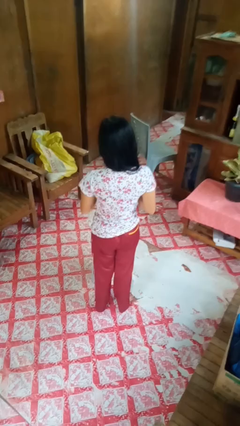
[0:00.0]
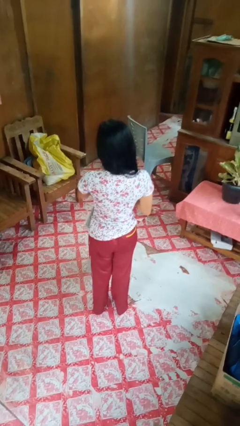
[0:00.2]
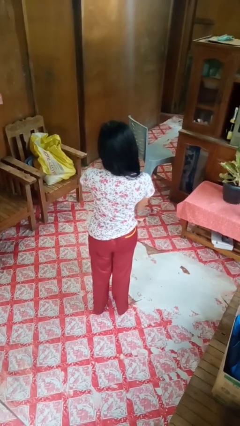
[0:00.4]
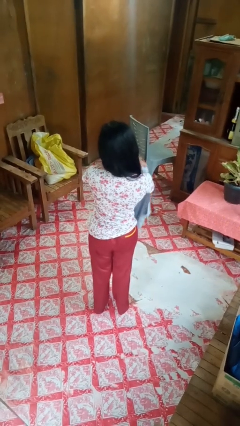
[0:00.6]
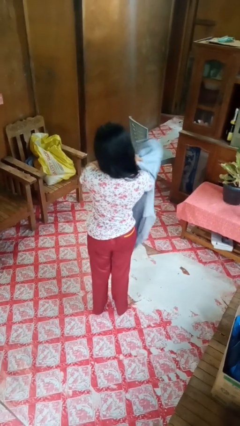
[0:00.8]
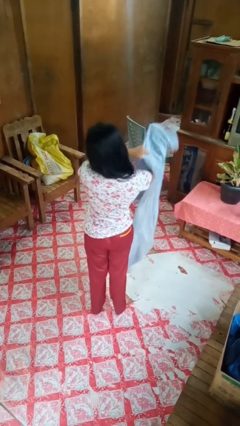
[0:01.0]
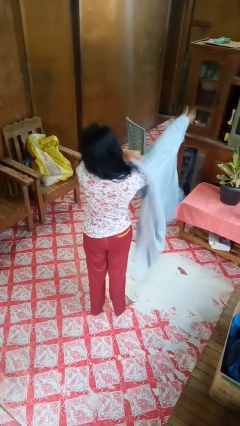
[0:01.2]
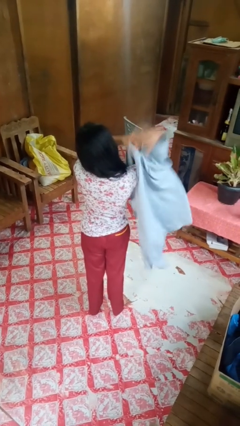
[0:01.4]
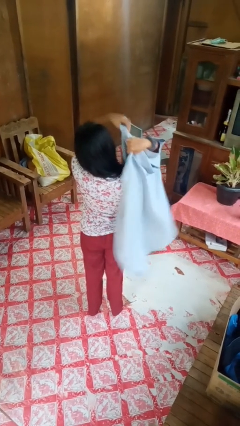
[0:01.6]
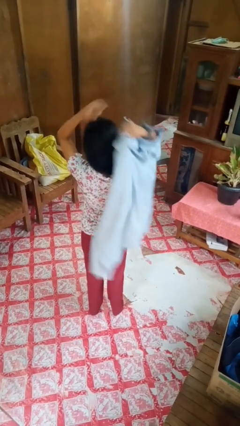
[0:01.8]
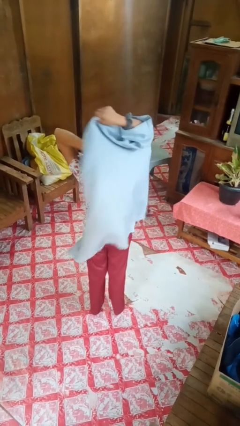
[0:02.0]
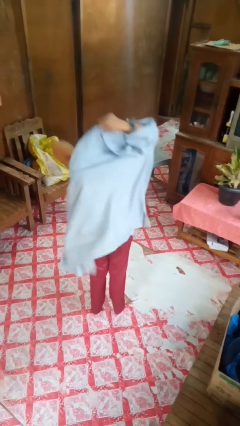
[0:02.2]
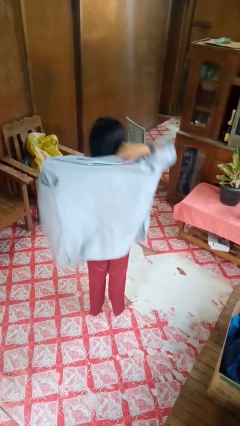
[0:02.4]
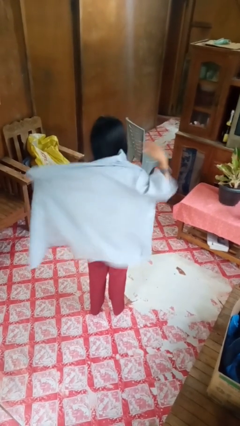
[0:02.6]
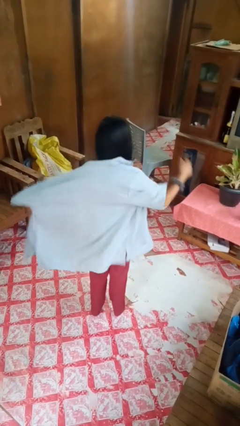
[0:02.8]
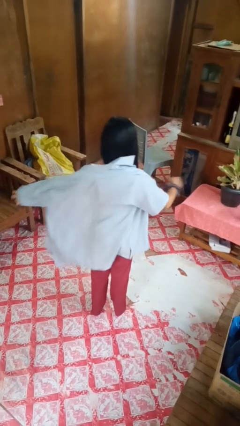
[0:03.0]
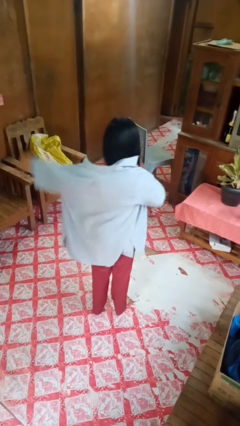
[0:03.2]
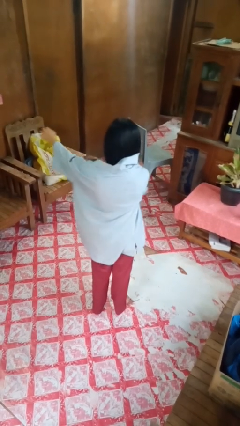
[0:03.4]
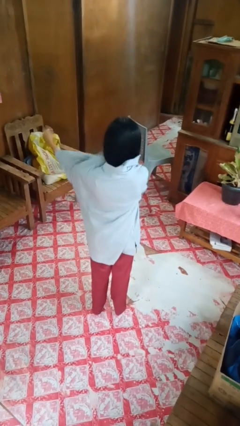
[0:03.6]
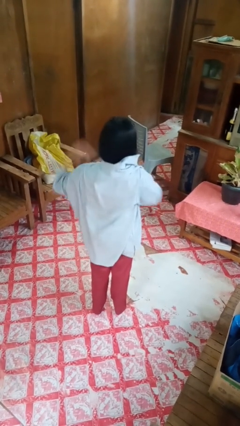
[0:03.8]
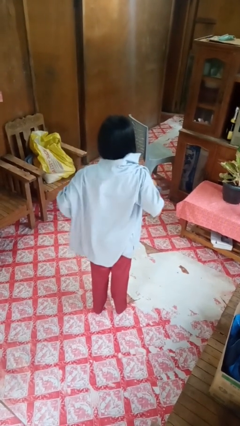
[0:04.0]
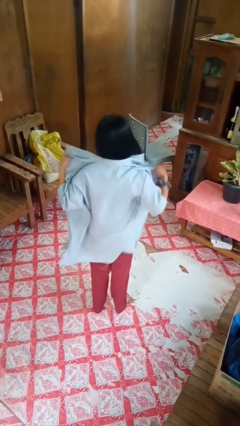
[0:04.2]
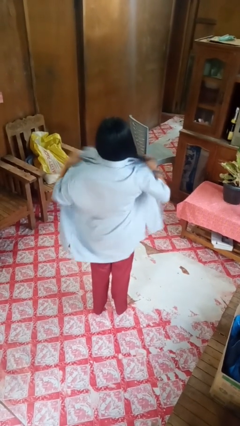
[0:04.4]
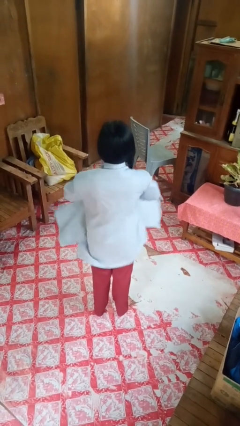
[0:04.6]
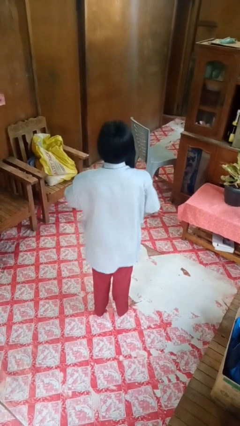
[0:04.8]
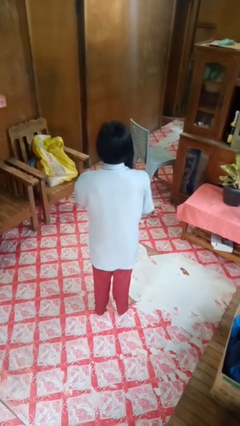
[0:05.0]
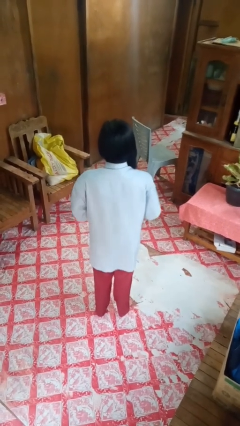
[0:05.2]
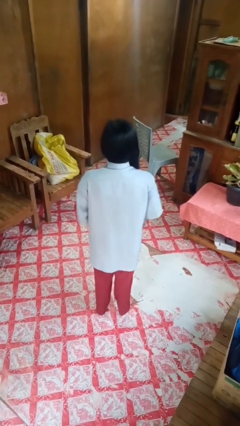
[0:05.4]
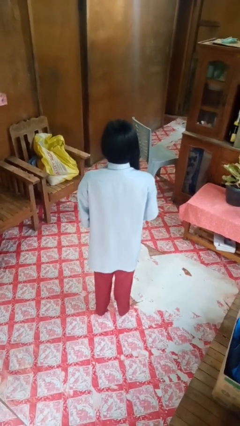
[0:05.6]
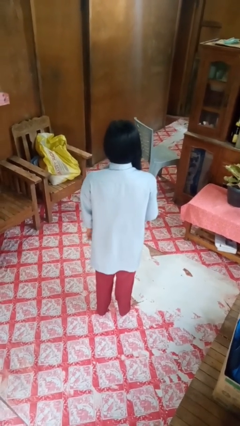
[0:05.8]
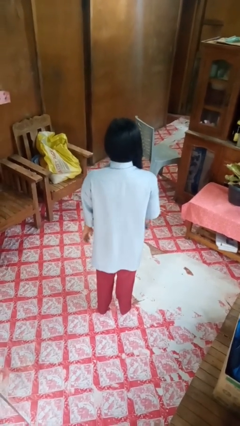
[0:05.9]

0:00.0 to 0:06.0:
person puts on shirt

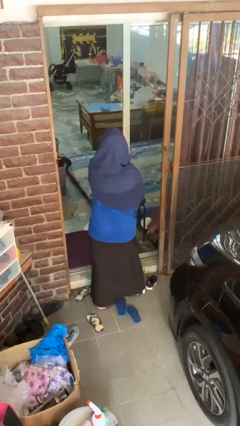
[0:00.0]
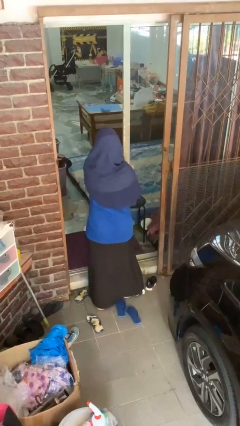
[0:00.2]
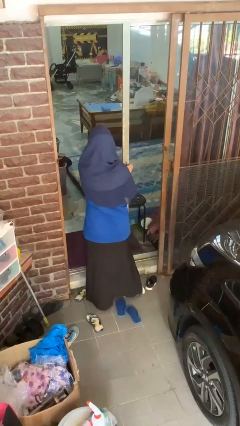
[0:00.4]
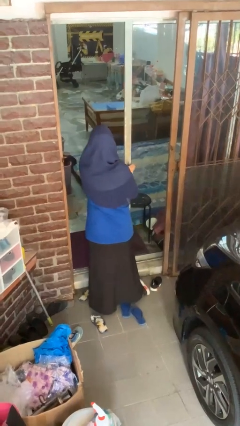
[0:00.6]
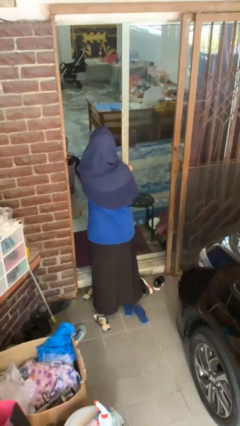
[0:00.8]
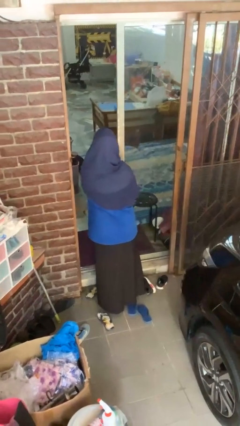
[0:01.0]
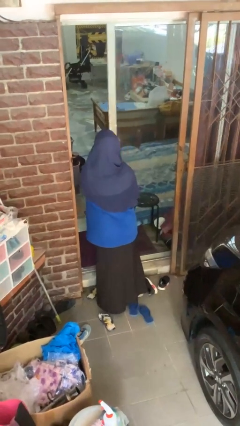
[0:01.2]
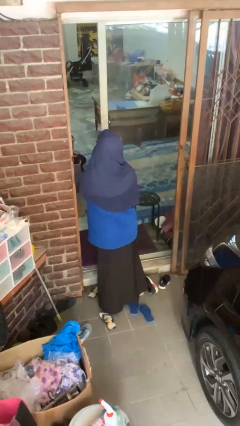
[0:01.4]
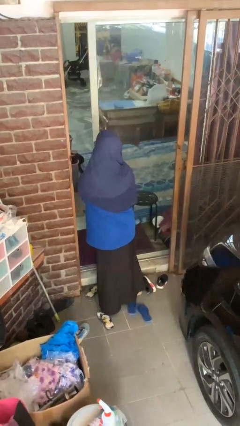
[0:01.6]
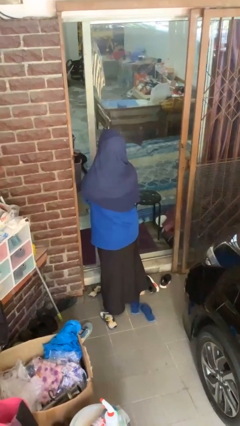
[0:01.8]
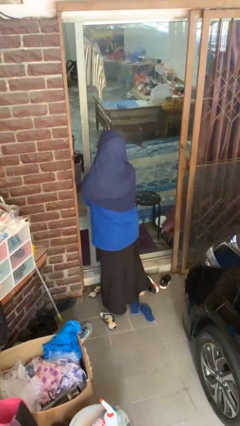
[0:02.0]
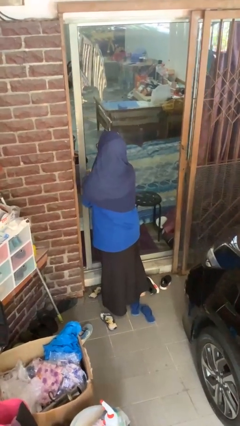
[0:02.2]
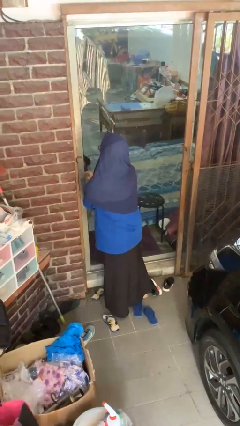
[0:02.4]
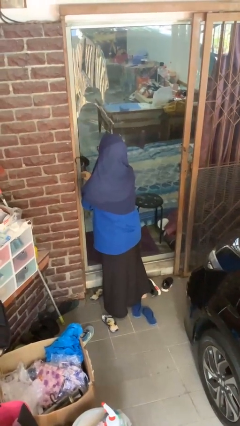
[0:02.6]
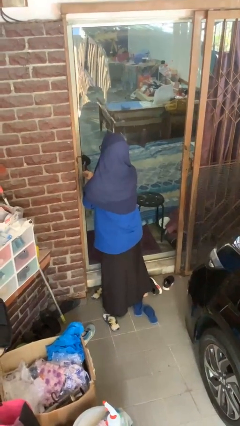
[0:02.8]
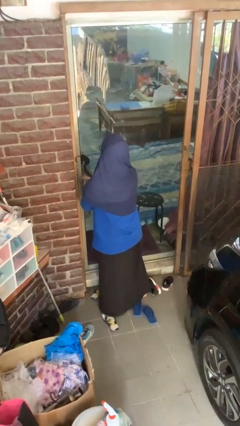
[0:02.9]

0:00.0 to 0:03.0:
person closes sliding door

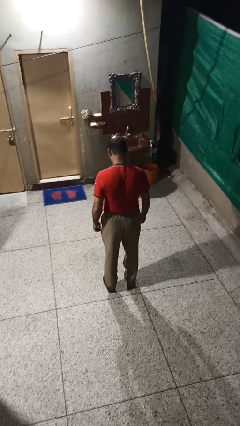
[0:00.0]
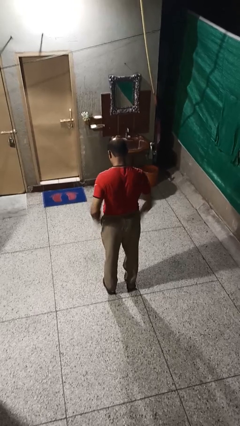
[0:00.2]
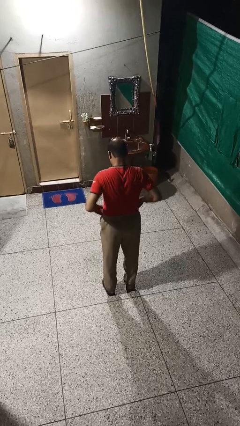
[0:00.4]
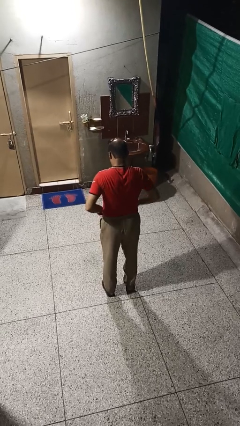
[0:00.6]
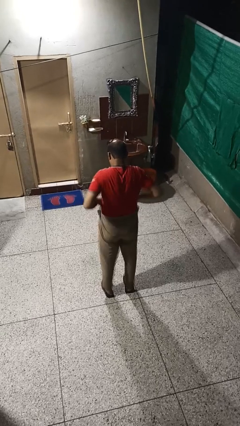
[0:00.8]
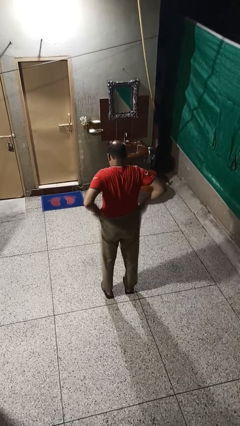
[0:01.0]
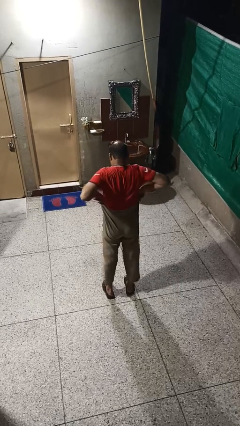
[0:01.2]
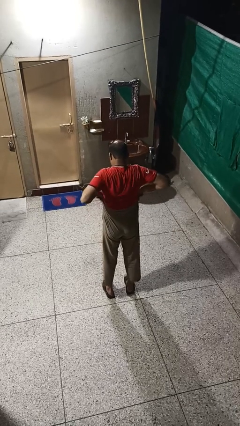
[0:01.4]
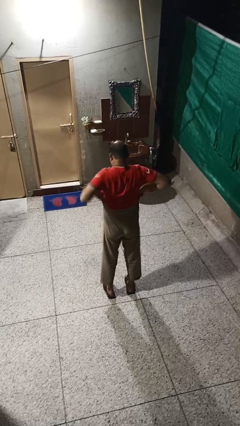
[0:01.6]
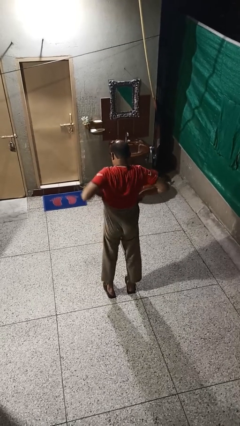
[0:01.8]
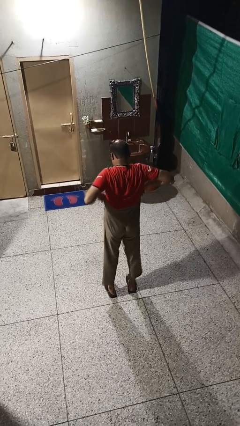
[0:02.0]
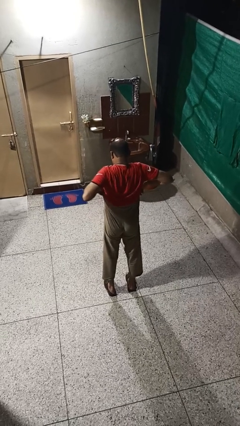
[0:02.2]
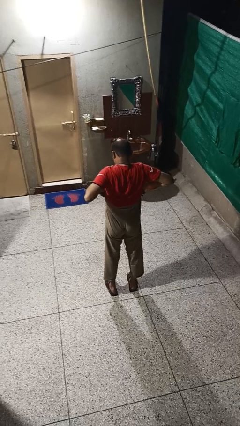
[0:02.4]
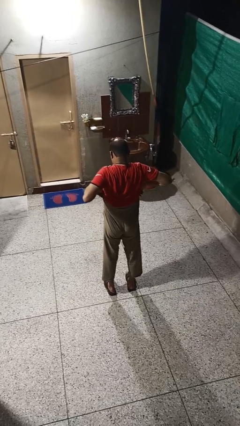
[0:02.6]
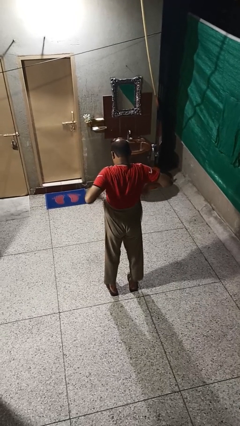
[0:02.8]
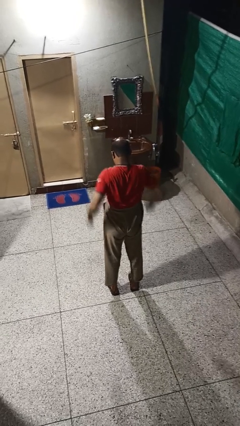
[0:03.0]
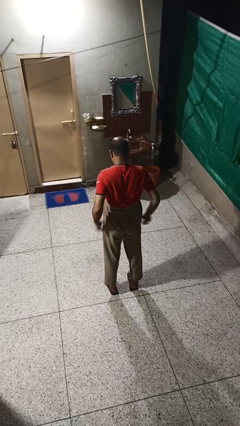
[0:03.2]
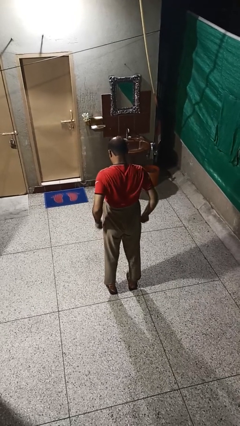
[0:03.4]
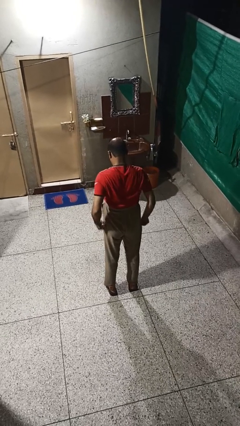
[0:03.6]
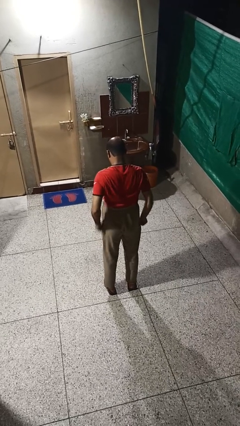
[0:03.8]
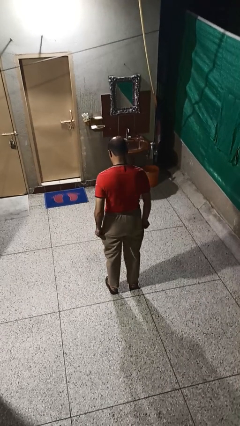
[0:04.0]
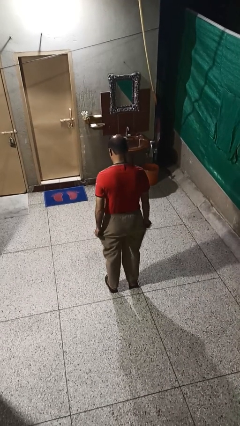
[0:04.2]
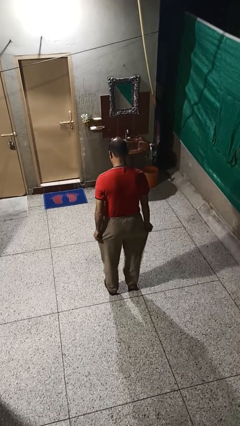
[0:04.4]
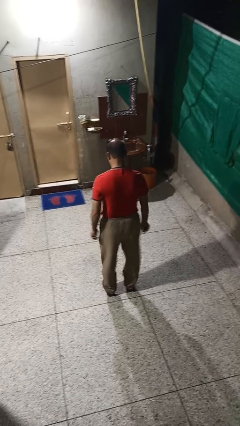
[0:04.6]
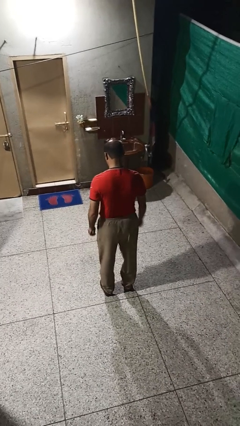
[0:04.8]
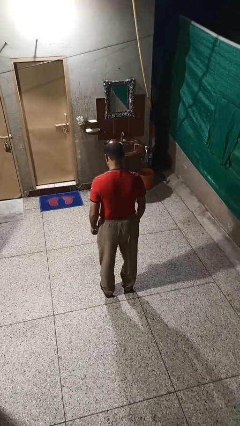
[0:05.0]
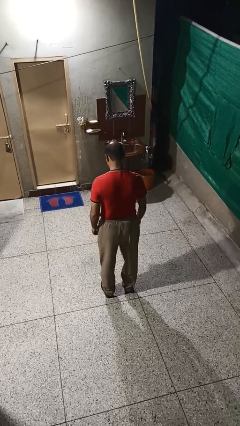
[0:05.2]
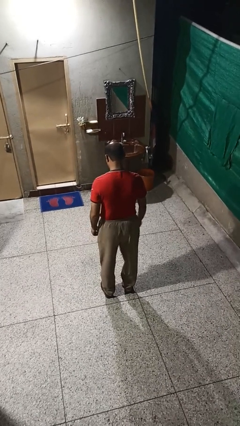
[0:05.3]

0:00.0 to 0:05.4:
person hikes up pants

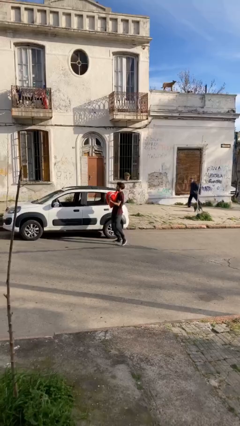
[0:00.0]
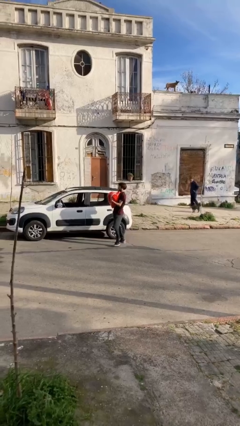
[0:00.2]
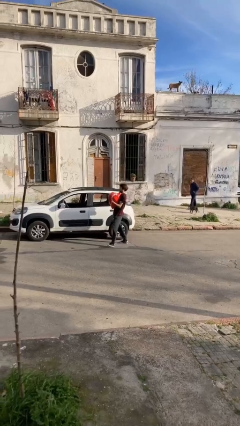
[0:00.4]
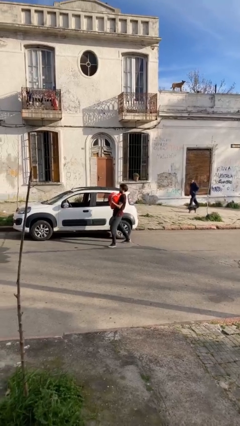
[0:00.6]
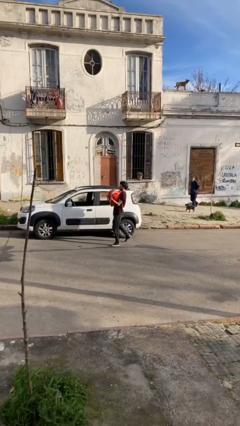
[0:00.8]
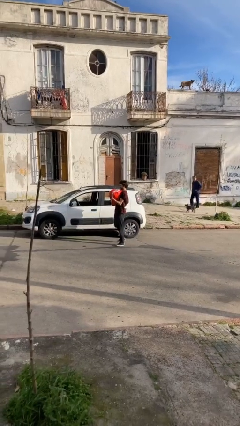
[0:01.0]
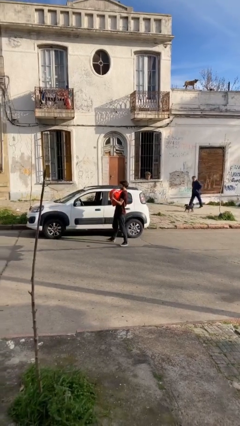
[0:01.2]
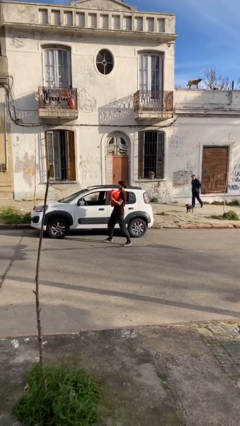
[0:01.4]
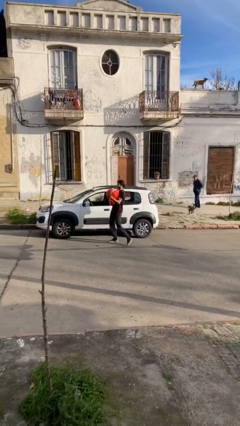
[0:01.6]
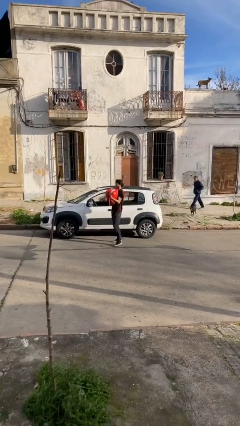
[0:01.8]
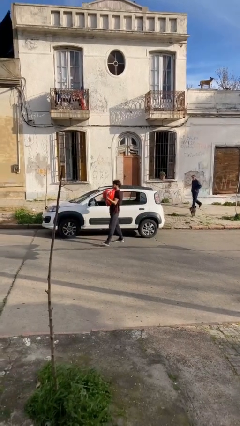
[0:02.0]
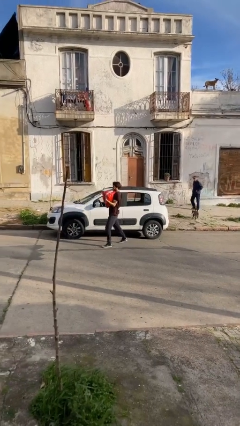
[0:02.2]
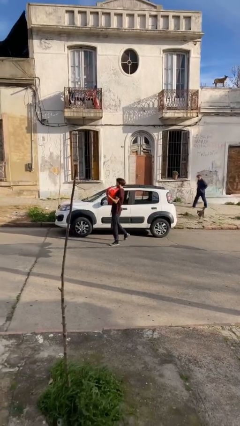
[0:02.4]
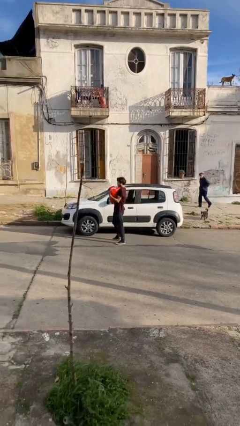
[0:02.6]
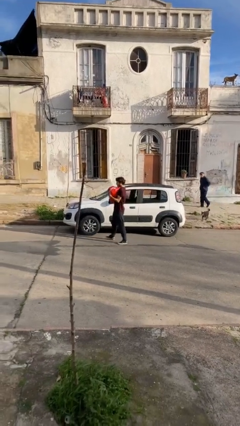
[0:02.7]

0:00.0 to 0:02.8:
person carries heavy object
